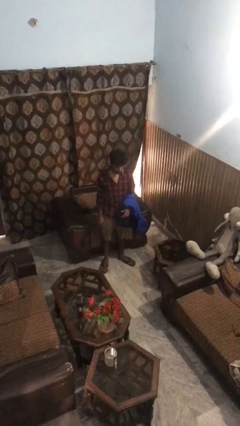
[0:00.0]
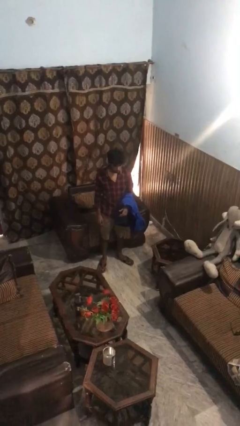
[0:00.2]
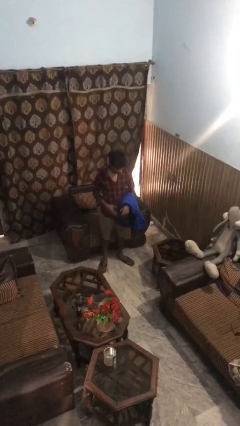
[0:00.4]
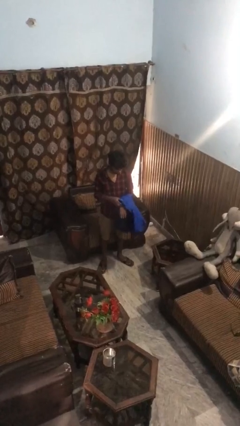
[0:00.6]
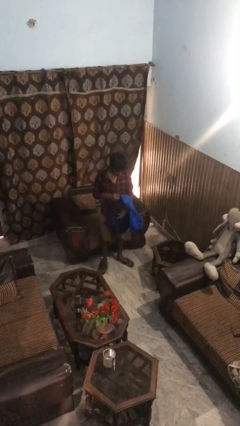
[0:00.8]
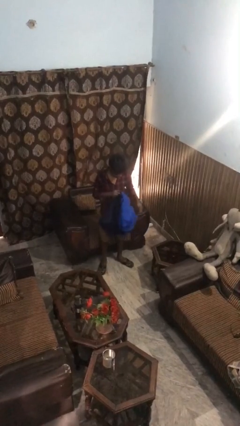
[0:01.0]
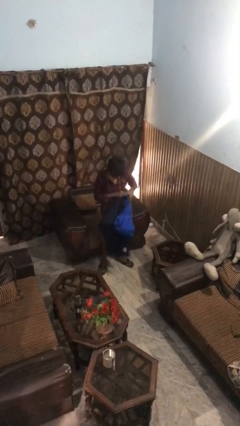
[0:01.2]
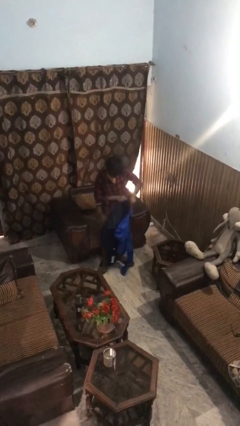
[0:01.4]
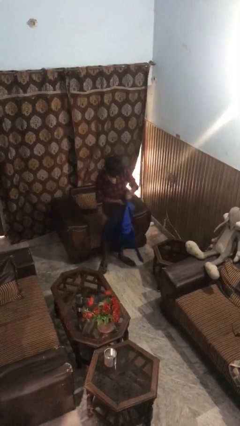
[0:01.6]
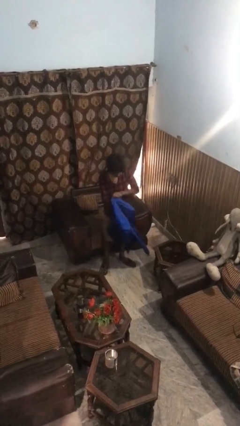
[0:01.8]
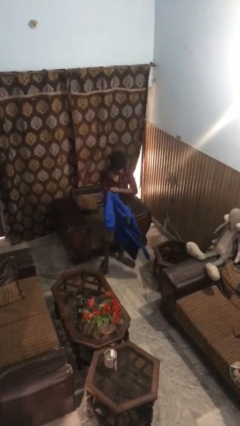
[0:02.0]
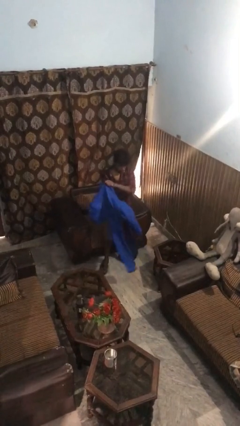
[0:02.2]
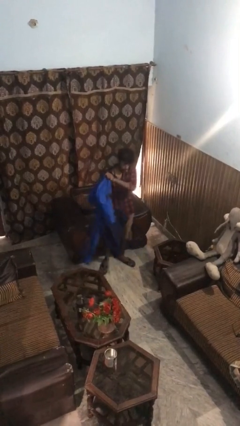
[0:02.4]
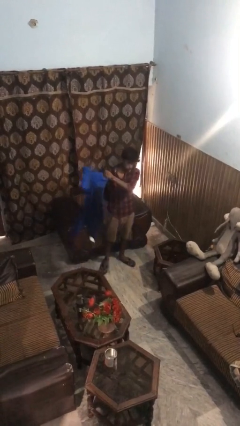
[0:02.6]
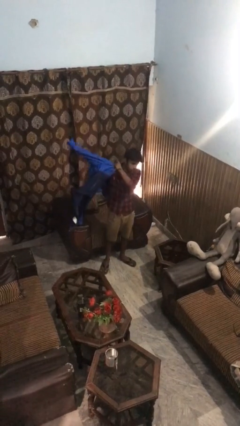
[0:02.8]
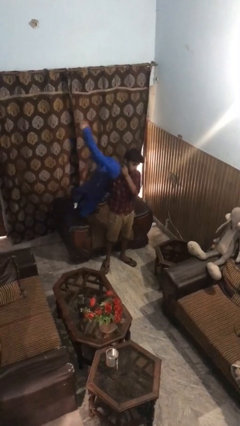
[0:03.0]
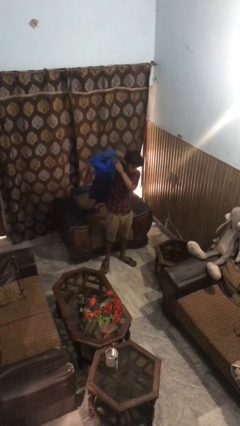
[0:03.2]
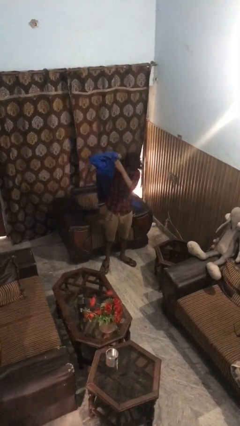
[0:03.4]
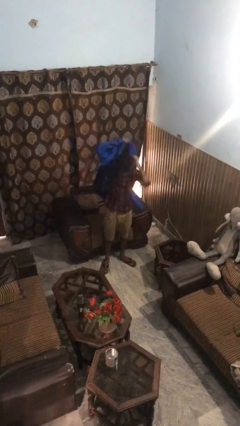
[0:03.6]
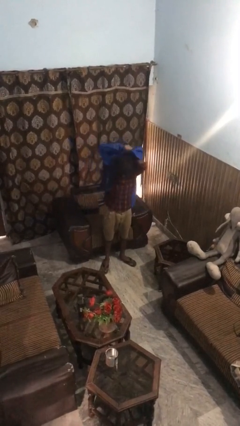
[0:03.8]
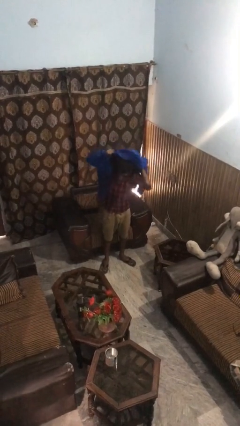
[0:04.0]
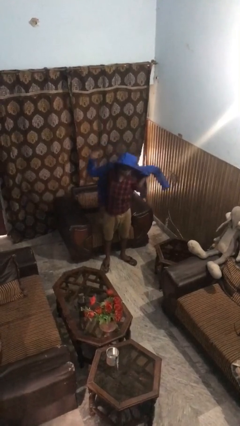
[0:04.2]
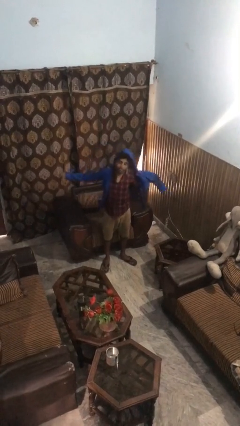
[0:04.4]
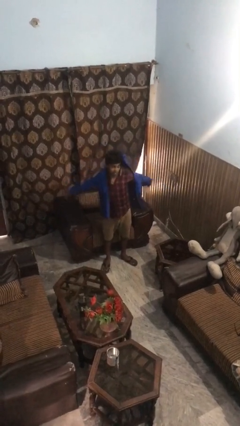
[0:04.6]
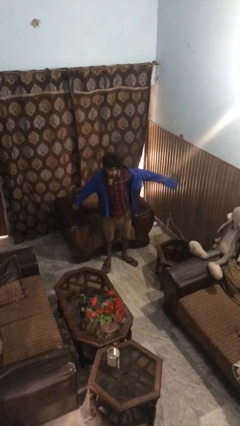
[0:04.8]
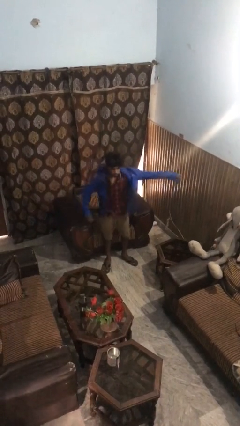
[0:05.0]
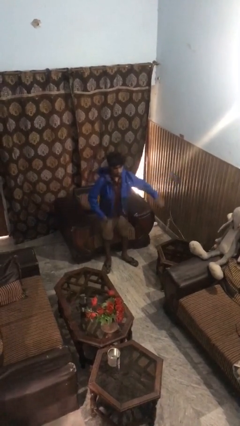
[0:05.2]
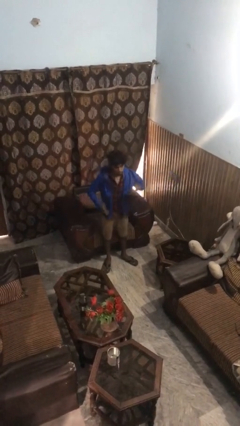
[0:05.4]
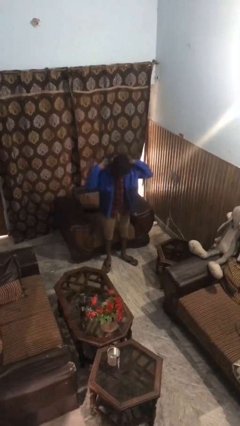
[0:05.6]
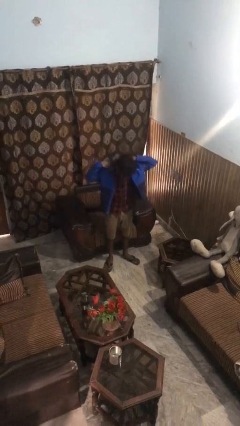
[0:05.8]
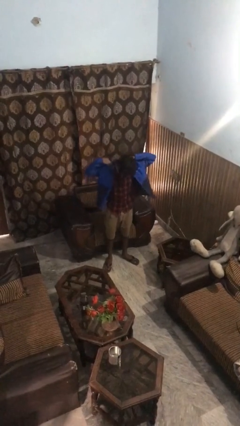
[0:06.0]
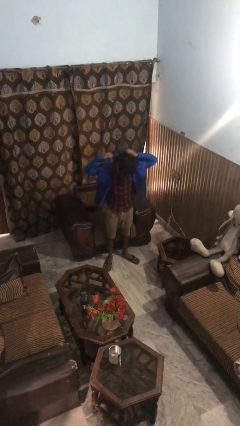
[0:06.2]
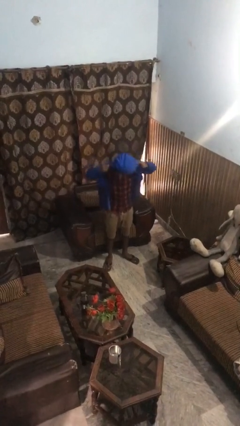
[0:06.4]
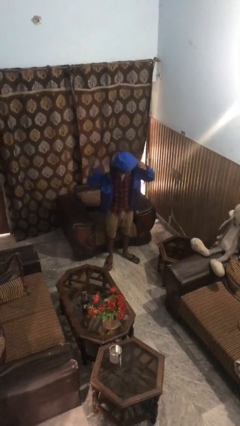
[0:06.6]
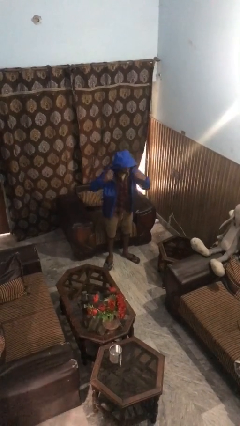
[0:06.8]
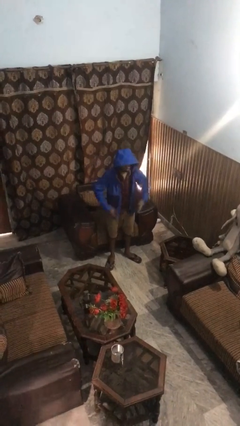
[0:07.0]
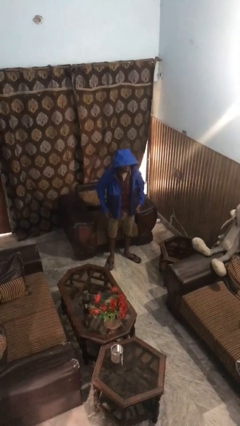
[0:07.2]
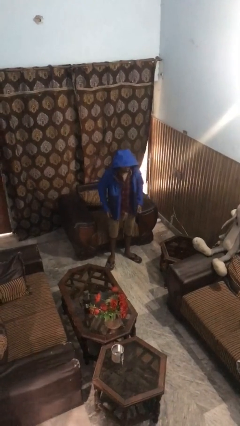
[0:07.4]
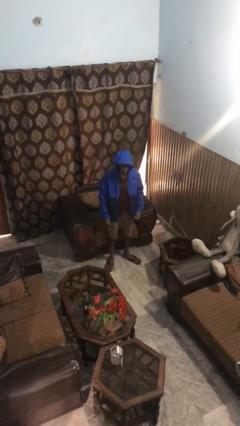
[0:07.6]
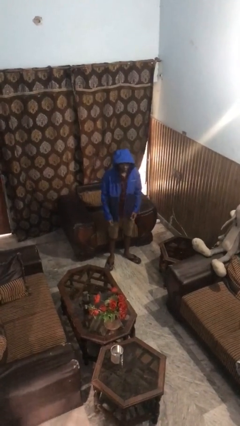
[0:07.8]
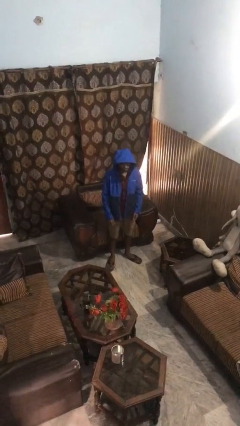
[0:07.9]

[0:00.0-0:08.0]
person puts on hoodie

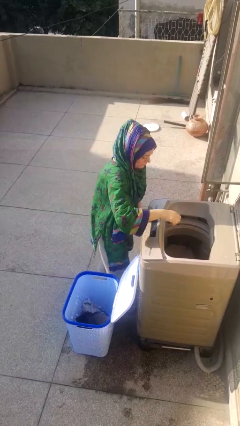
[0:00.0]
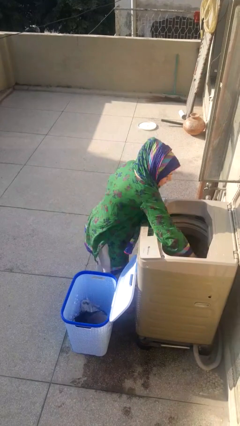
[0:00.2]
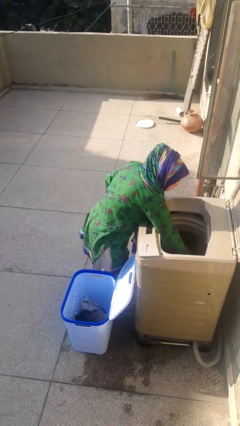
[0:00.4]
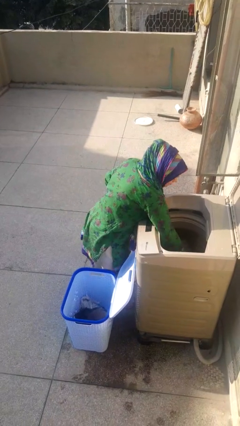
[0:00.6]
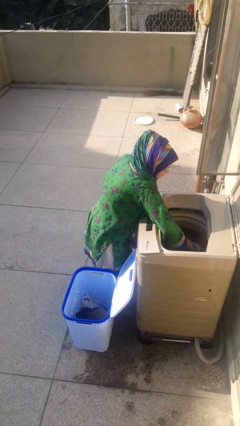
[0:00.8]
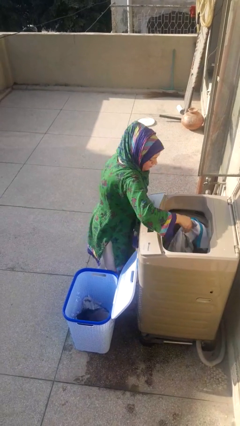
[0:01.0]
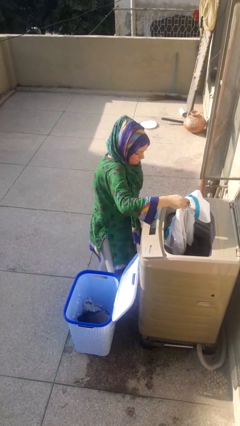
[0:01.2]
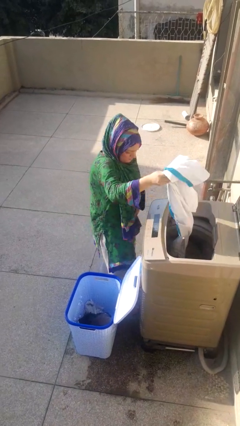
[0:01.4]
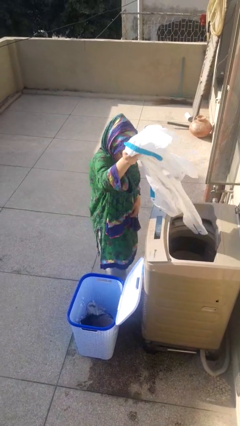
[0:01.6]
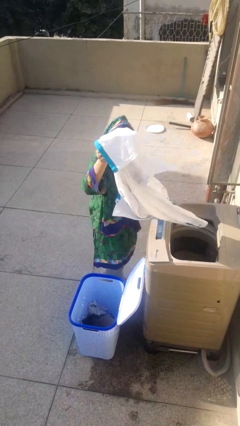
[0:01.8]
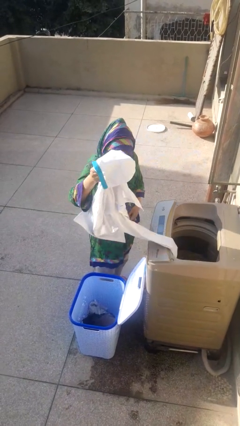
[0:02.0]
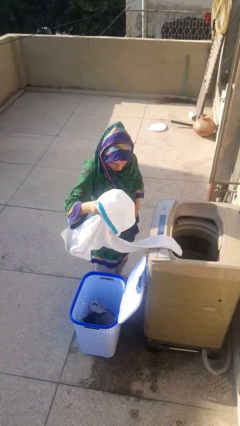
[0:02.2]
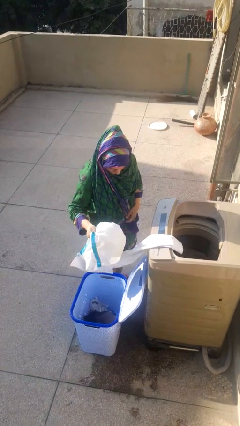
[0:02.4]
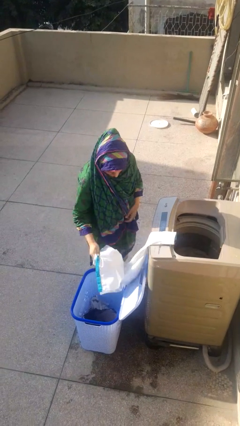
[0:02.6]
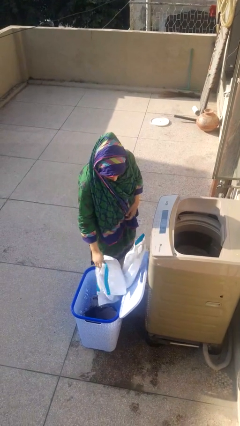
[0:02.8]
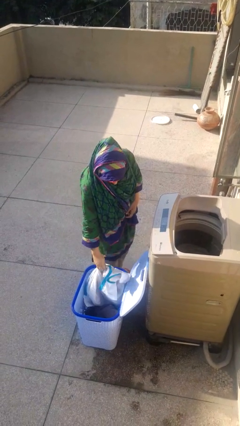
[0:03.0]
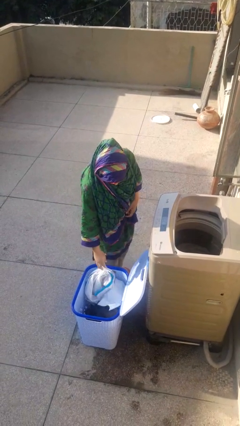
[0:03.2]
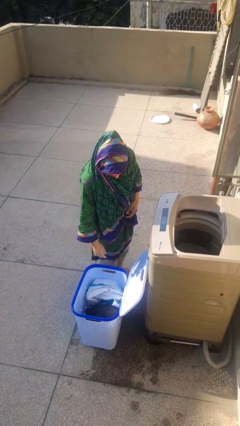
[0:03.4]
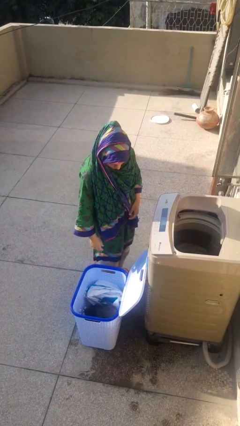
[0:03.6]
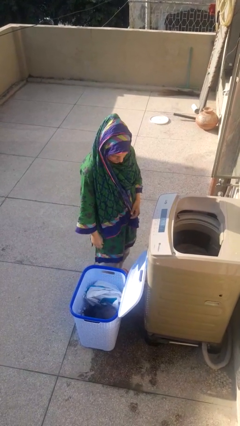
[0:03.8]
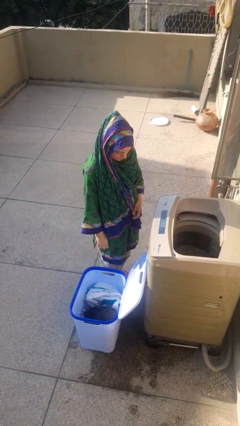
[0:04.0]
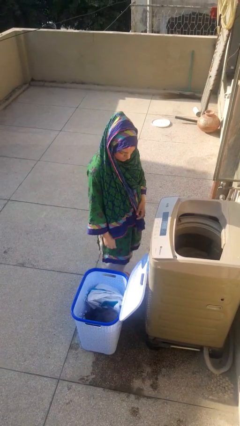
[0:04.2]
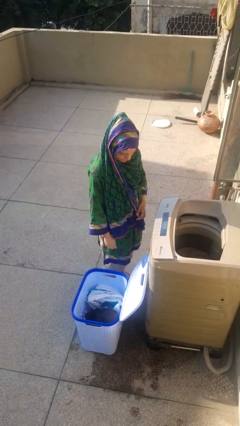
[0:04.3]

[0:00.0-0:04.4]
person unloads clotheswasher

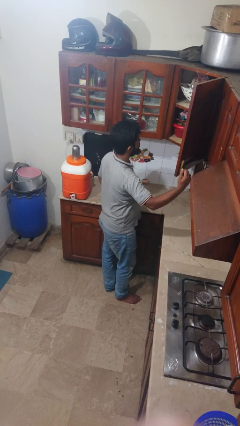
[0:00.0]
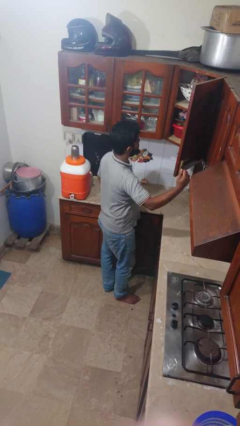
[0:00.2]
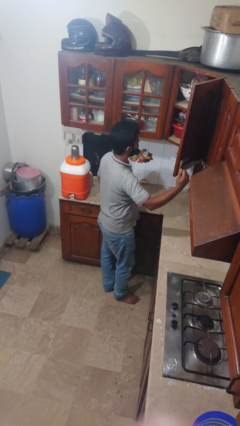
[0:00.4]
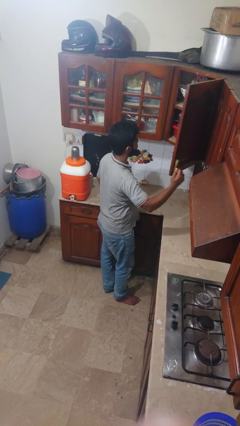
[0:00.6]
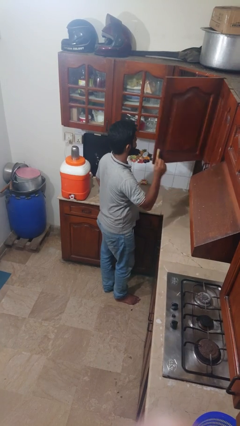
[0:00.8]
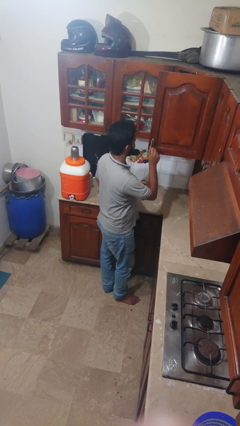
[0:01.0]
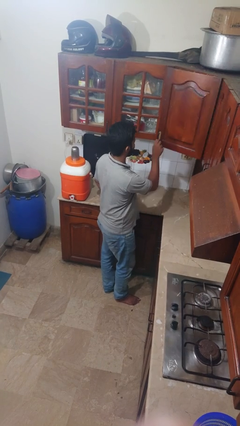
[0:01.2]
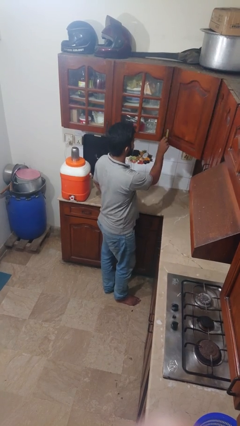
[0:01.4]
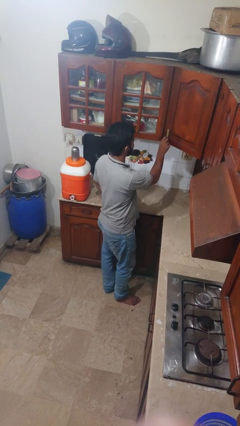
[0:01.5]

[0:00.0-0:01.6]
person closes cabinet

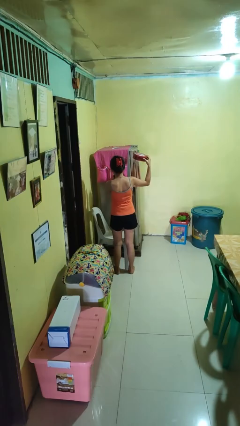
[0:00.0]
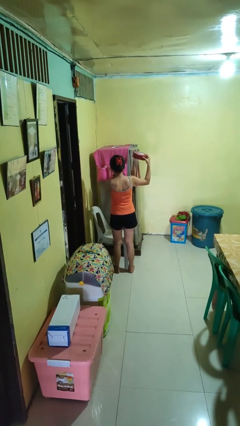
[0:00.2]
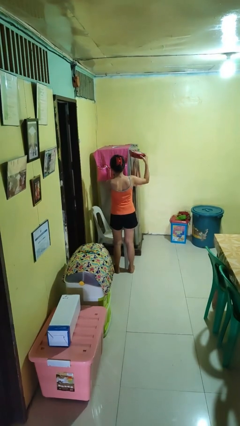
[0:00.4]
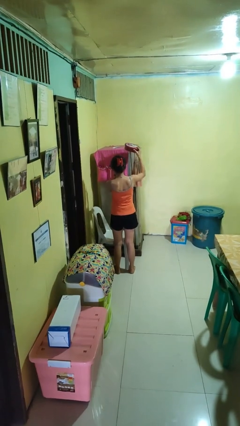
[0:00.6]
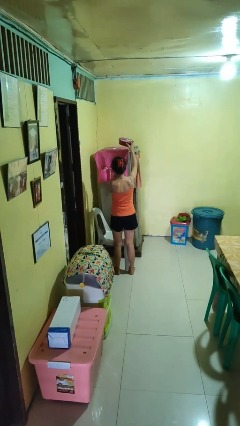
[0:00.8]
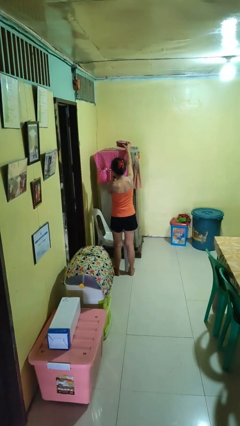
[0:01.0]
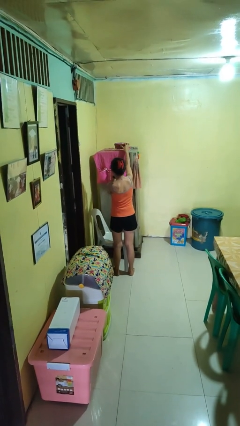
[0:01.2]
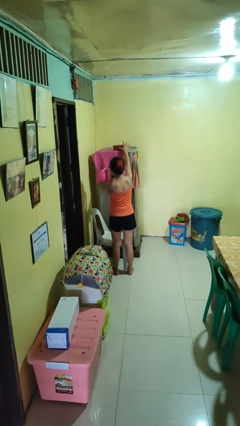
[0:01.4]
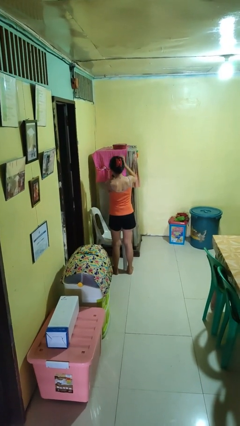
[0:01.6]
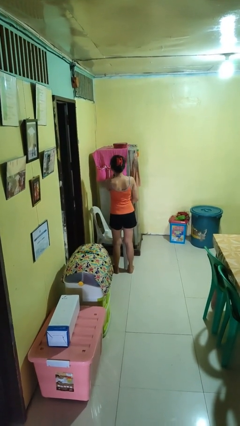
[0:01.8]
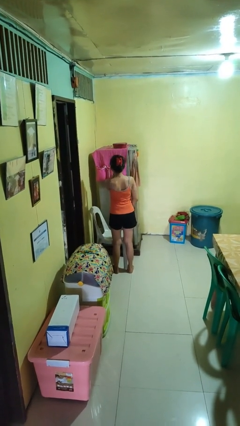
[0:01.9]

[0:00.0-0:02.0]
person puts down object on shelf

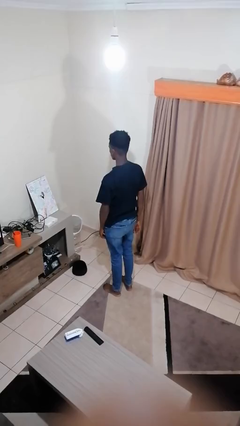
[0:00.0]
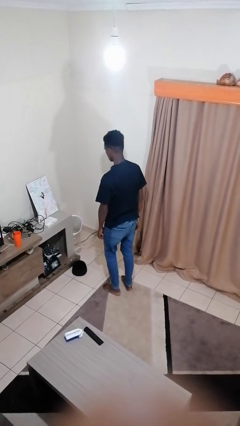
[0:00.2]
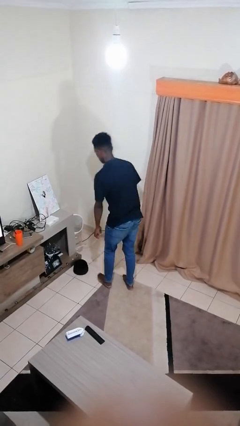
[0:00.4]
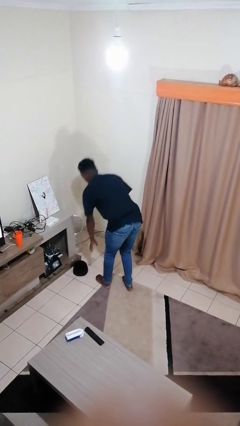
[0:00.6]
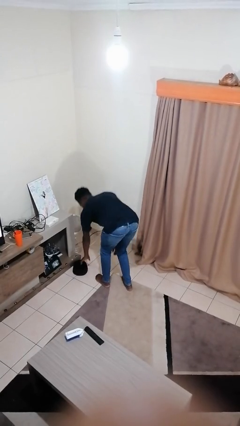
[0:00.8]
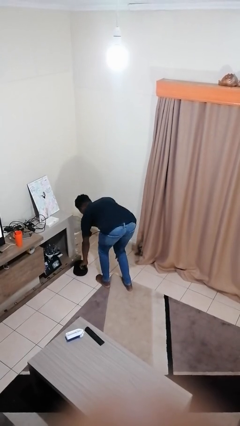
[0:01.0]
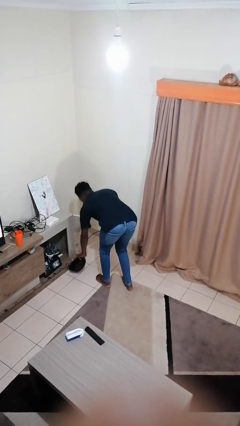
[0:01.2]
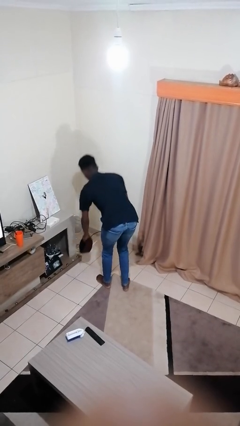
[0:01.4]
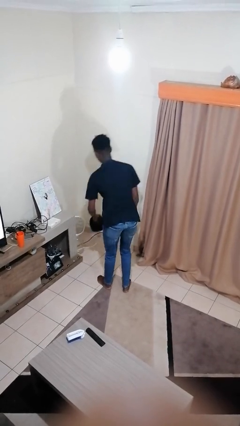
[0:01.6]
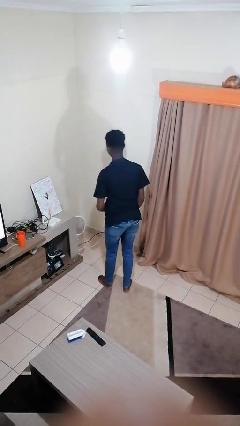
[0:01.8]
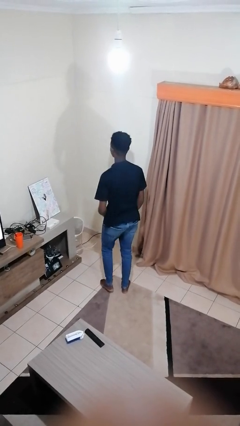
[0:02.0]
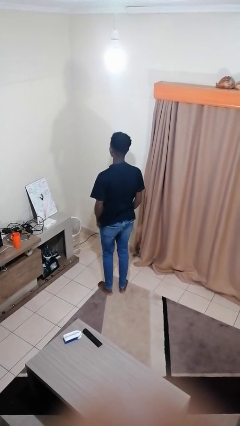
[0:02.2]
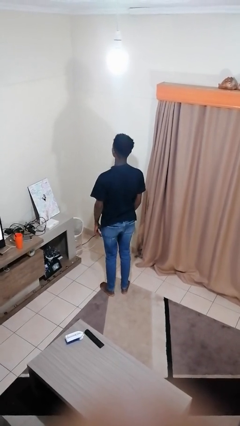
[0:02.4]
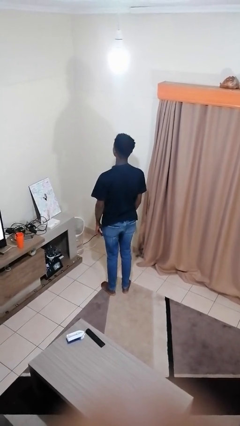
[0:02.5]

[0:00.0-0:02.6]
person picks up object from floor
